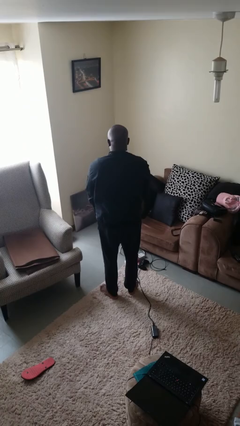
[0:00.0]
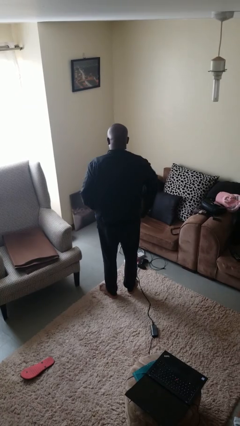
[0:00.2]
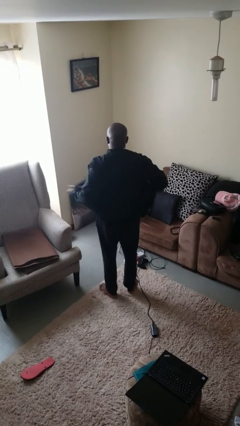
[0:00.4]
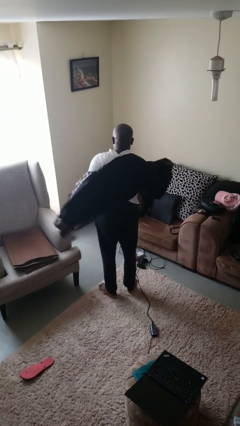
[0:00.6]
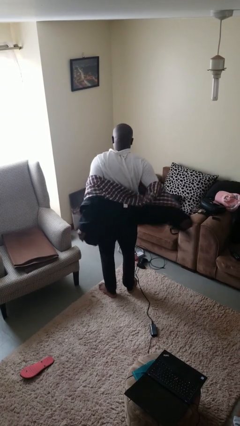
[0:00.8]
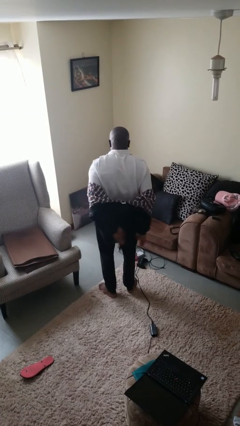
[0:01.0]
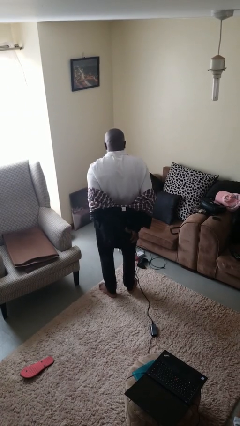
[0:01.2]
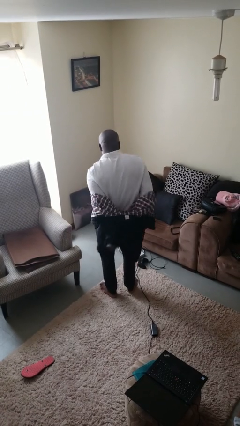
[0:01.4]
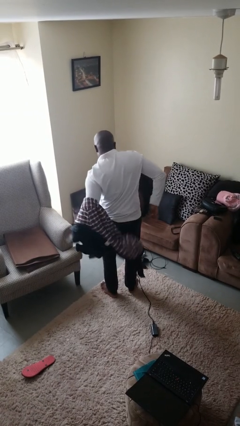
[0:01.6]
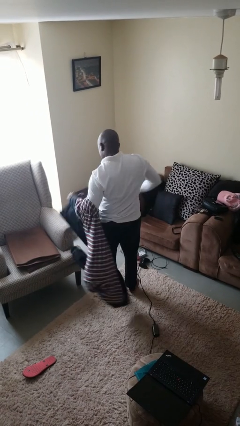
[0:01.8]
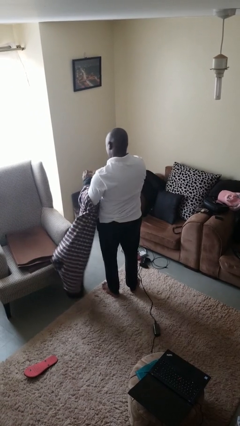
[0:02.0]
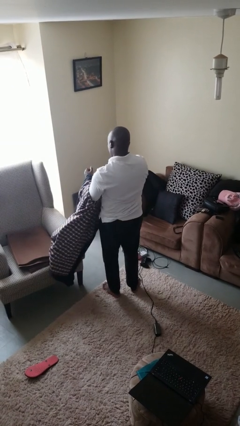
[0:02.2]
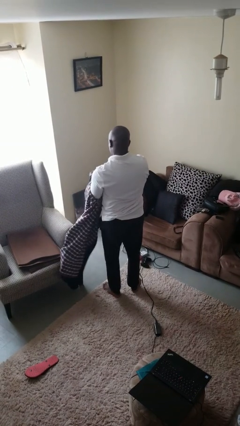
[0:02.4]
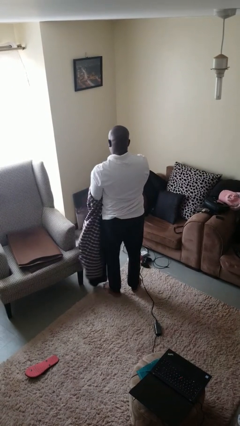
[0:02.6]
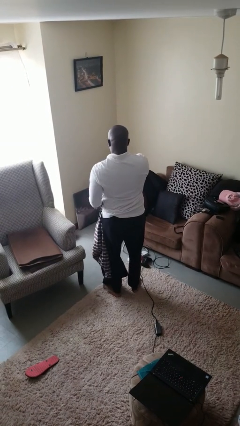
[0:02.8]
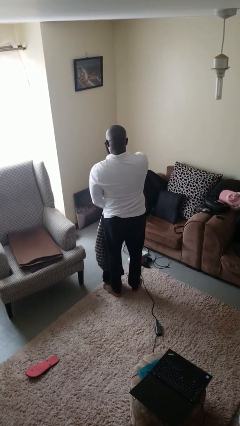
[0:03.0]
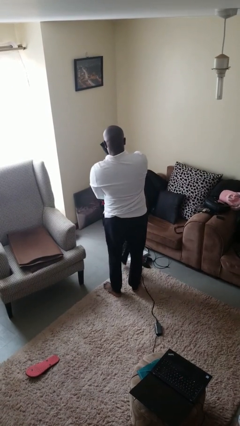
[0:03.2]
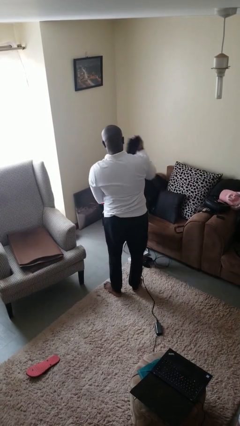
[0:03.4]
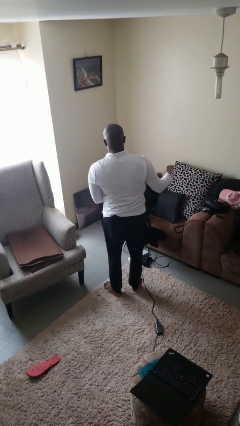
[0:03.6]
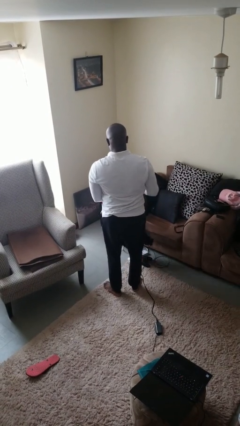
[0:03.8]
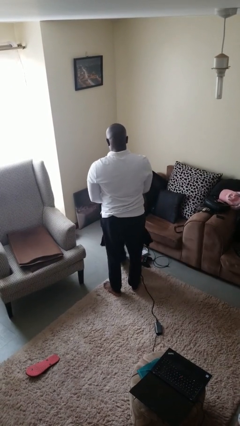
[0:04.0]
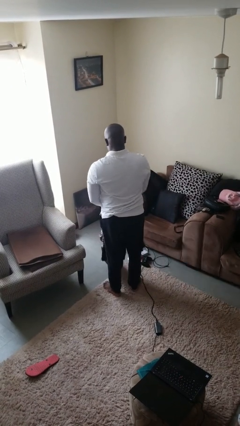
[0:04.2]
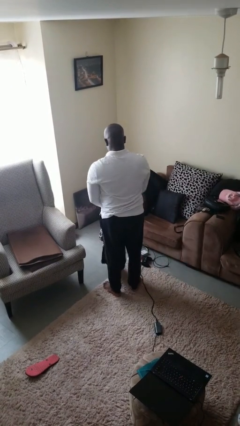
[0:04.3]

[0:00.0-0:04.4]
person takes off jacket

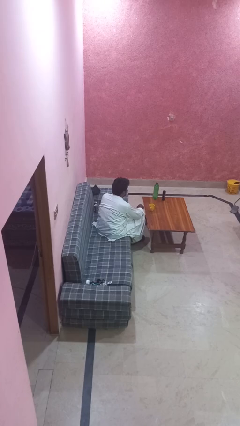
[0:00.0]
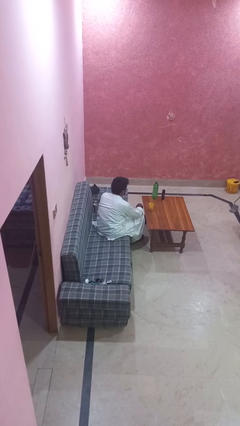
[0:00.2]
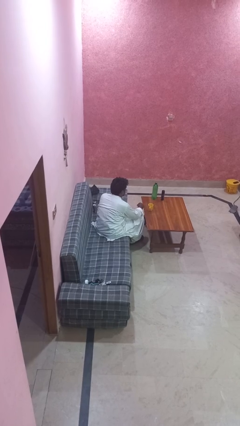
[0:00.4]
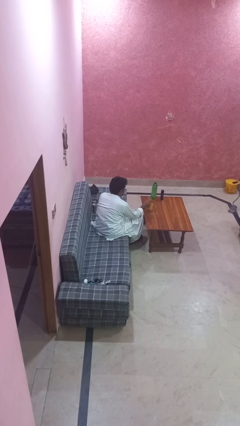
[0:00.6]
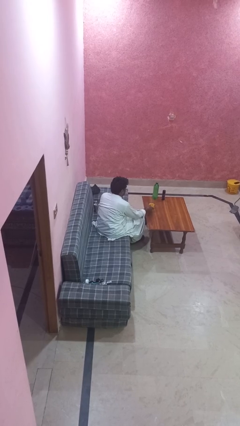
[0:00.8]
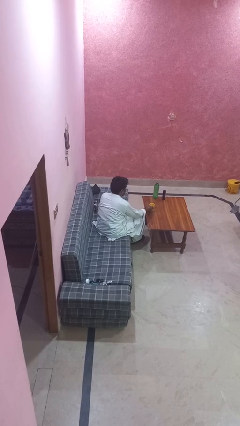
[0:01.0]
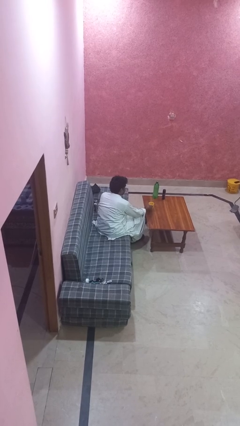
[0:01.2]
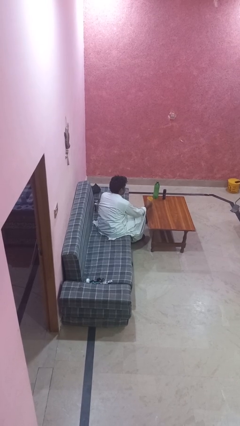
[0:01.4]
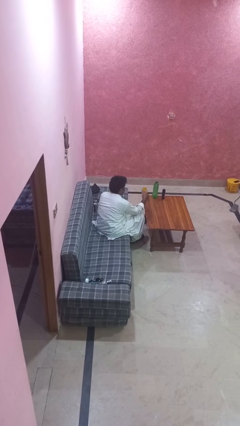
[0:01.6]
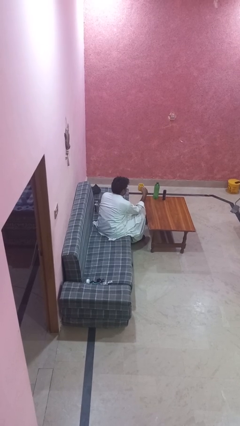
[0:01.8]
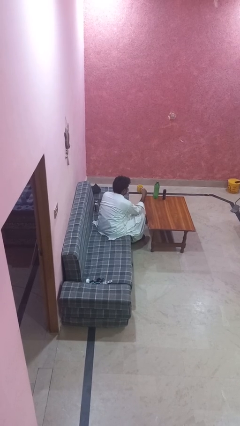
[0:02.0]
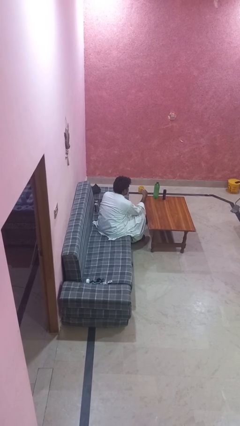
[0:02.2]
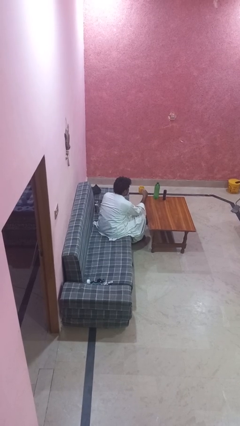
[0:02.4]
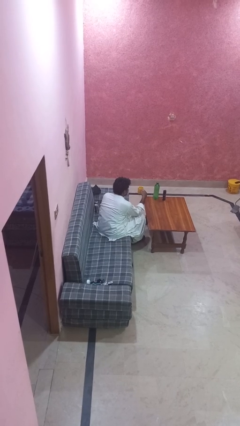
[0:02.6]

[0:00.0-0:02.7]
person picks up object from table

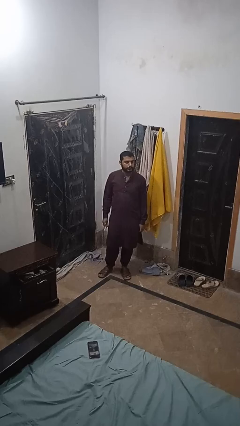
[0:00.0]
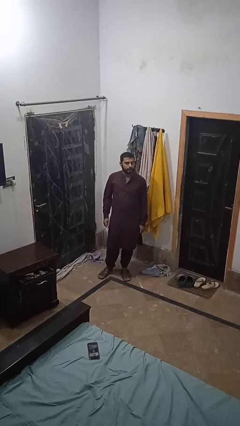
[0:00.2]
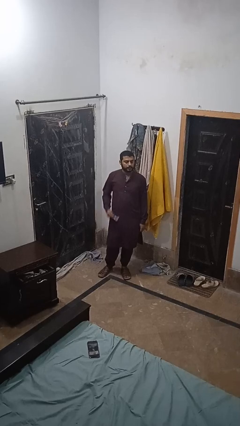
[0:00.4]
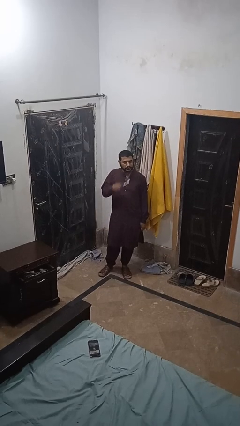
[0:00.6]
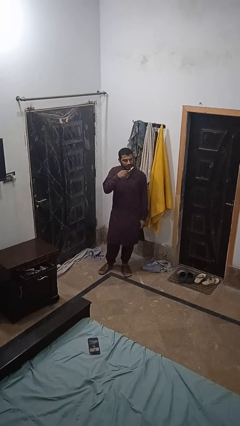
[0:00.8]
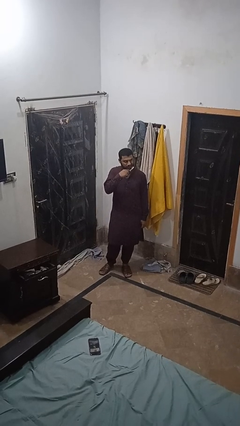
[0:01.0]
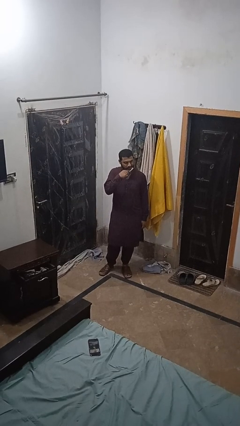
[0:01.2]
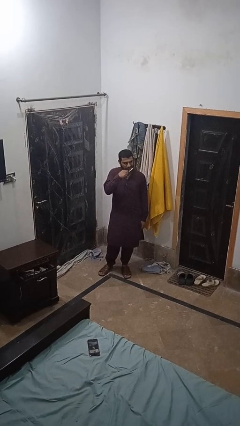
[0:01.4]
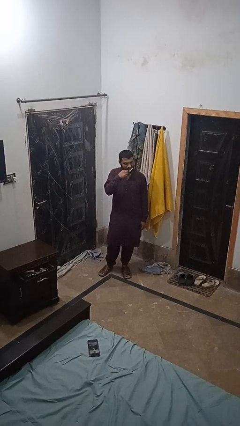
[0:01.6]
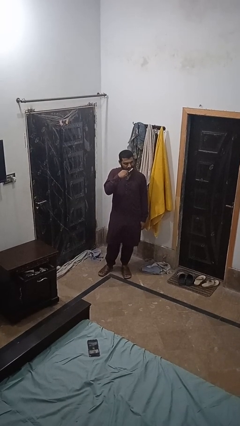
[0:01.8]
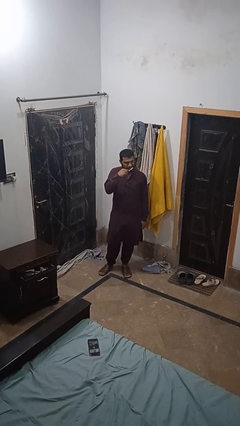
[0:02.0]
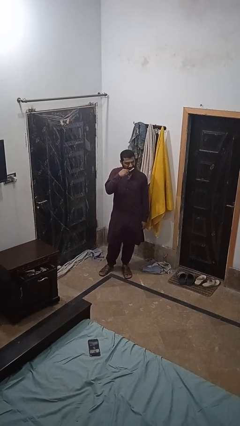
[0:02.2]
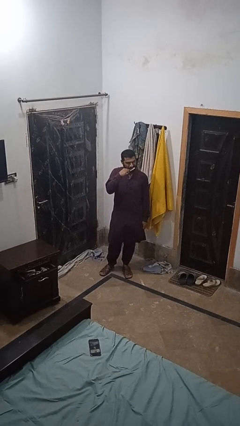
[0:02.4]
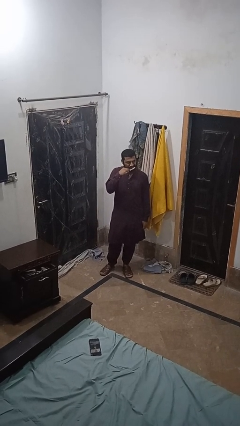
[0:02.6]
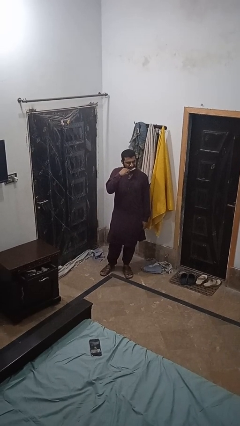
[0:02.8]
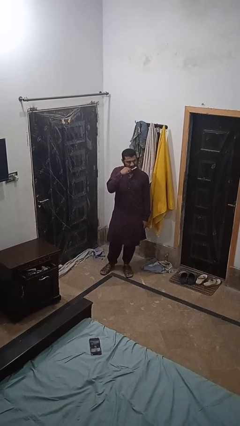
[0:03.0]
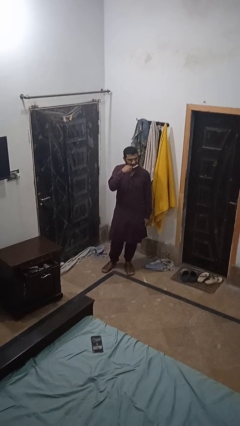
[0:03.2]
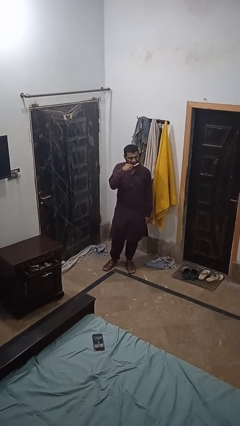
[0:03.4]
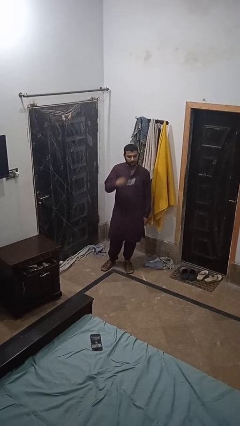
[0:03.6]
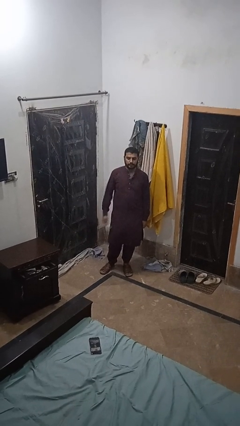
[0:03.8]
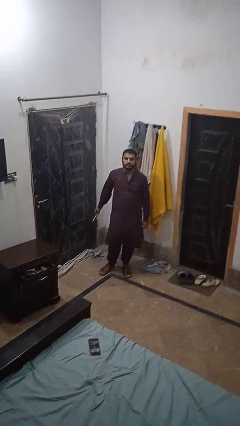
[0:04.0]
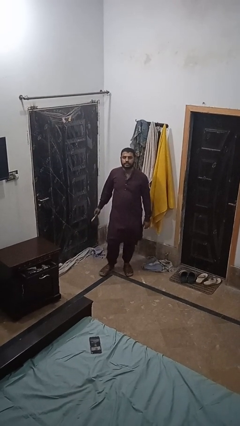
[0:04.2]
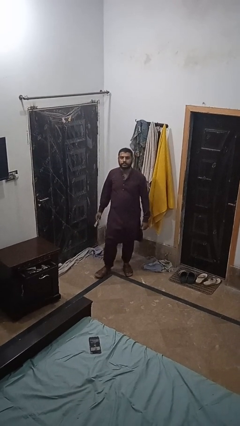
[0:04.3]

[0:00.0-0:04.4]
person brushes teeth

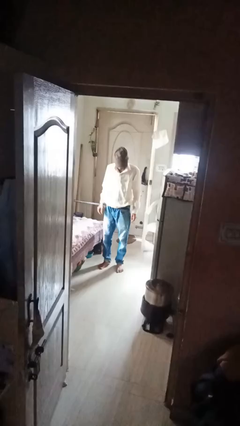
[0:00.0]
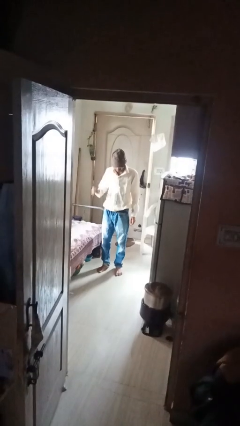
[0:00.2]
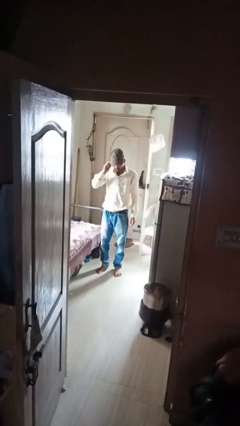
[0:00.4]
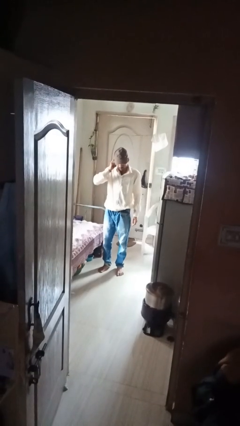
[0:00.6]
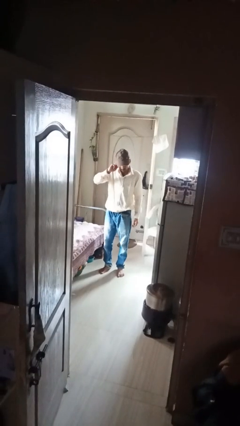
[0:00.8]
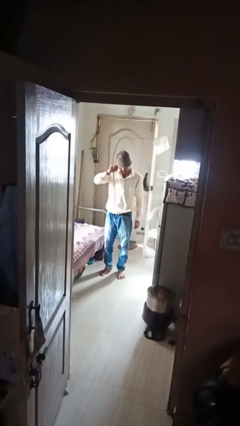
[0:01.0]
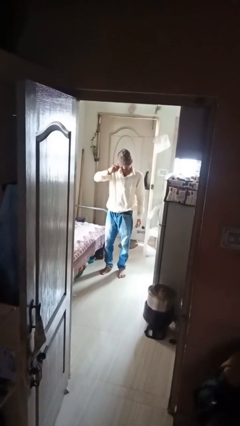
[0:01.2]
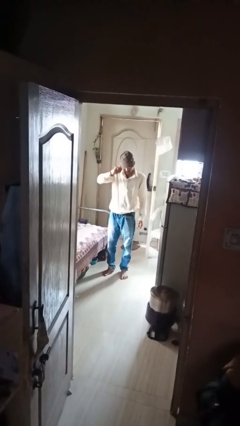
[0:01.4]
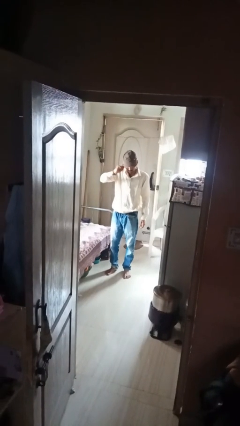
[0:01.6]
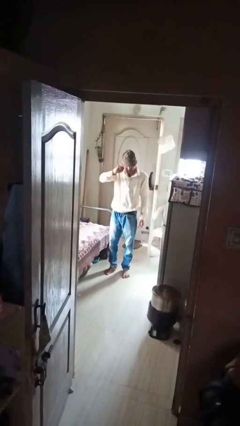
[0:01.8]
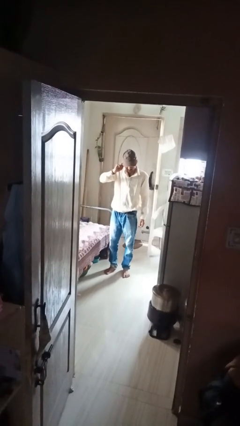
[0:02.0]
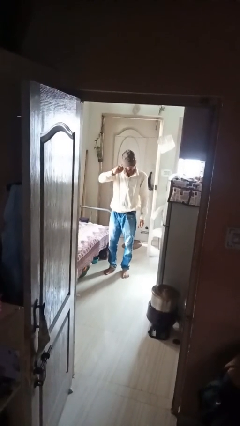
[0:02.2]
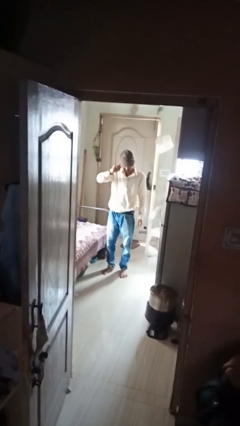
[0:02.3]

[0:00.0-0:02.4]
person touches earlobe

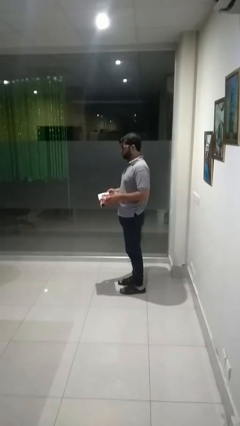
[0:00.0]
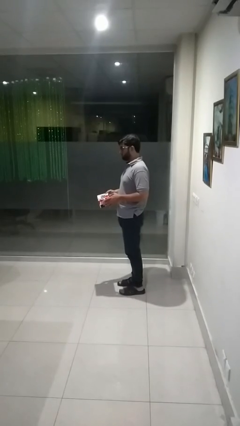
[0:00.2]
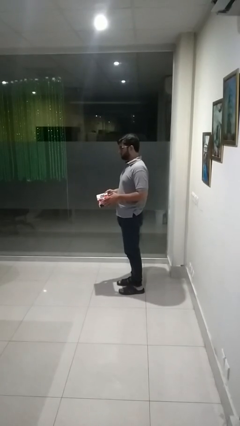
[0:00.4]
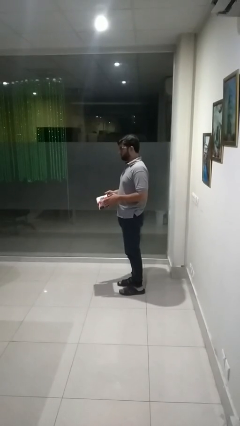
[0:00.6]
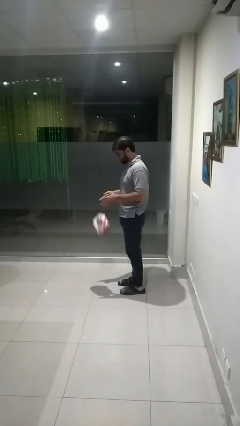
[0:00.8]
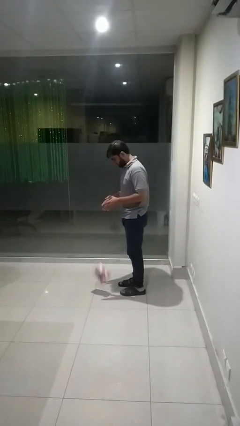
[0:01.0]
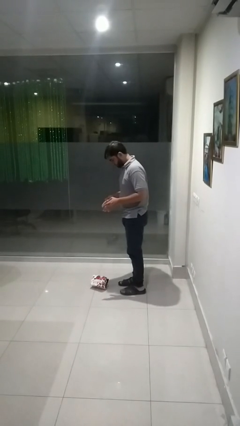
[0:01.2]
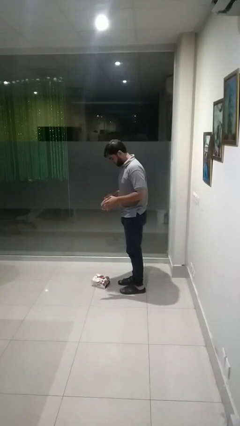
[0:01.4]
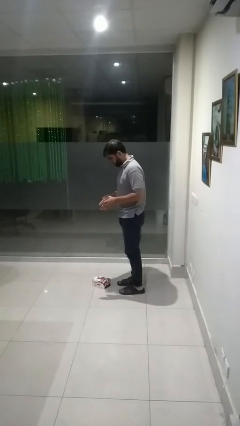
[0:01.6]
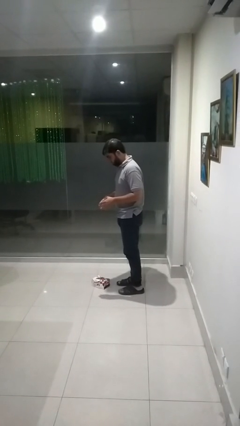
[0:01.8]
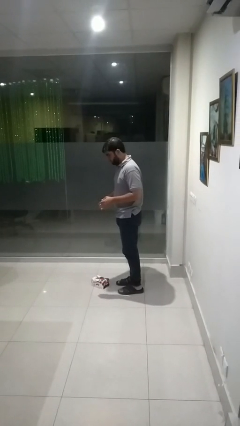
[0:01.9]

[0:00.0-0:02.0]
person drops object

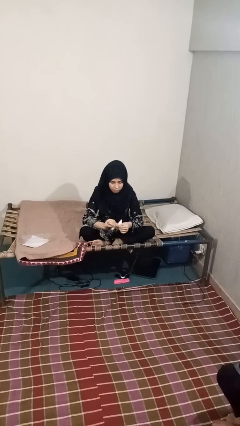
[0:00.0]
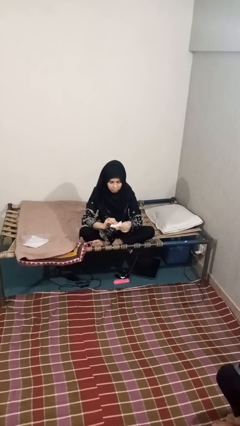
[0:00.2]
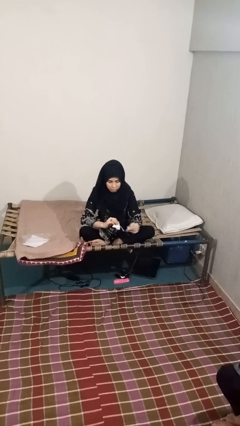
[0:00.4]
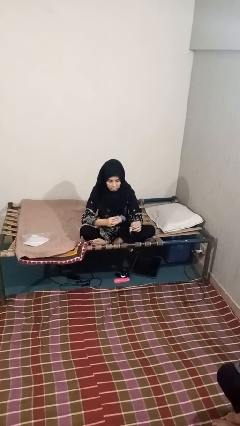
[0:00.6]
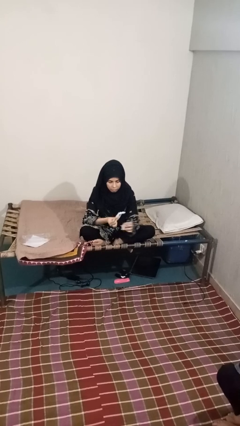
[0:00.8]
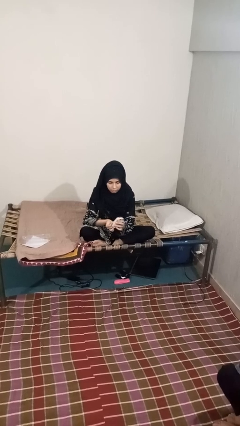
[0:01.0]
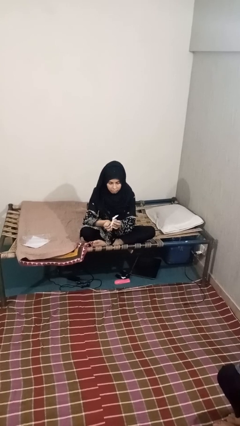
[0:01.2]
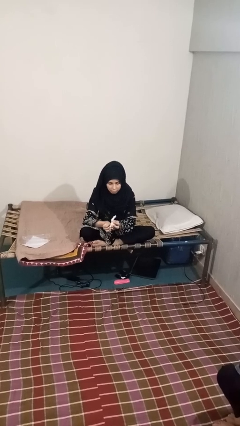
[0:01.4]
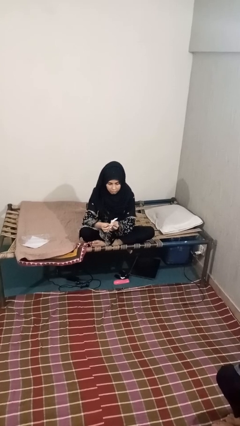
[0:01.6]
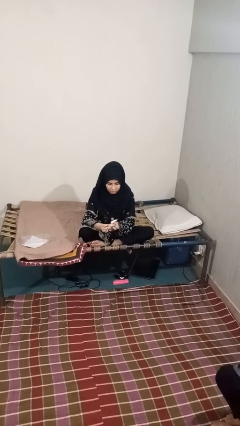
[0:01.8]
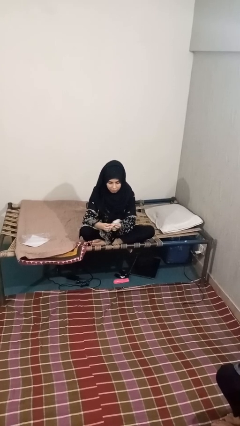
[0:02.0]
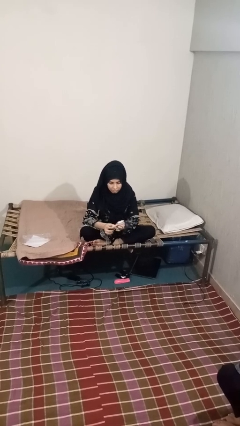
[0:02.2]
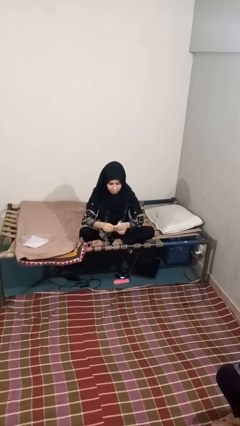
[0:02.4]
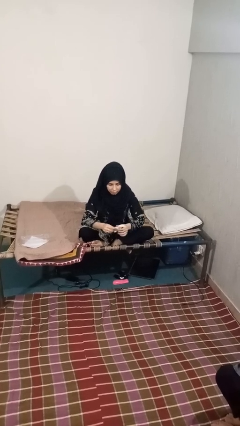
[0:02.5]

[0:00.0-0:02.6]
person tears paper
